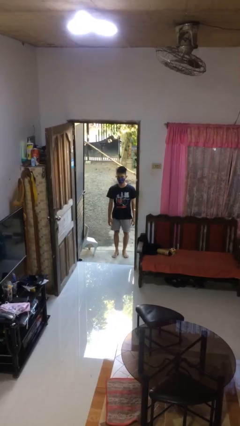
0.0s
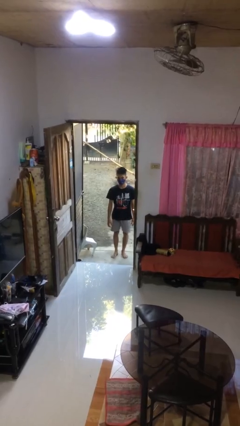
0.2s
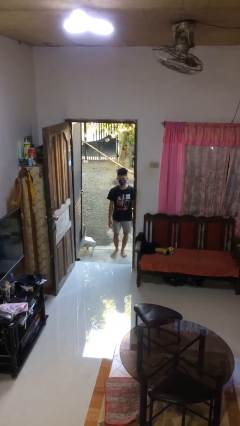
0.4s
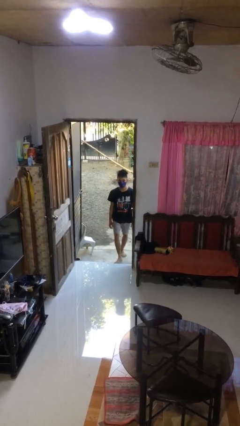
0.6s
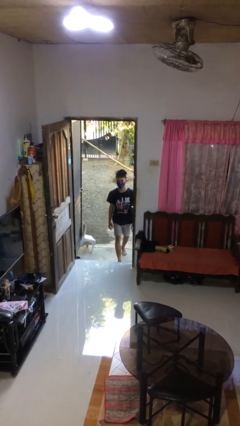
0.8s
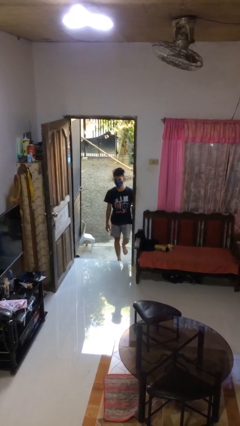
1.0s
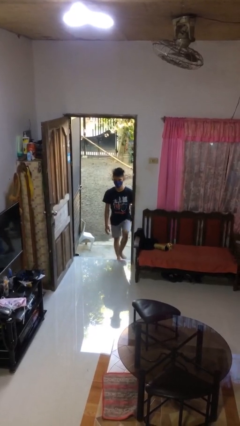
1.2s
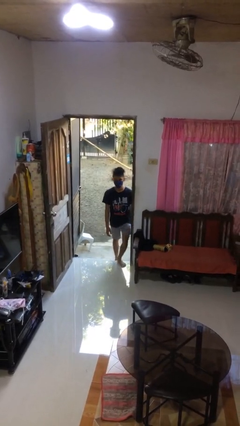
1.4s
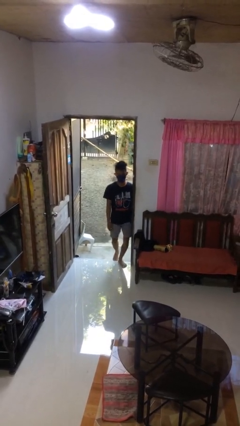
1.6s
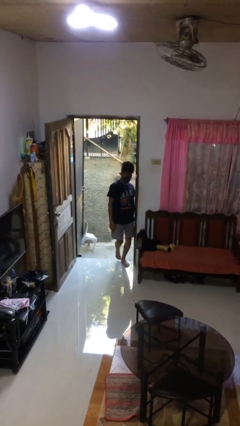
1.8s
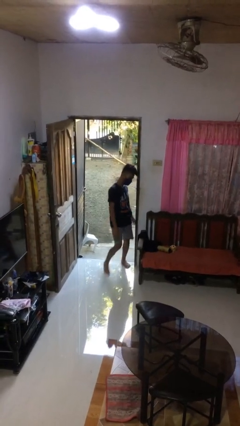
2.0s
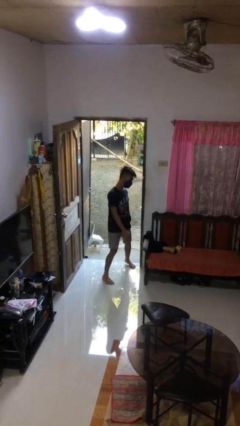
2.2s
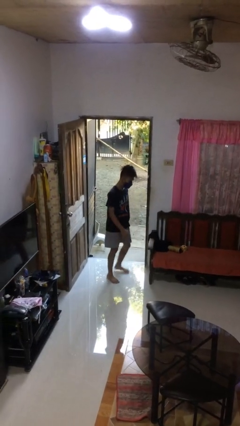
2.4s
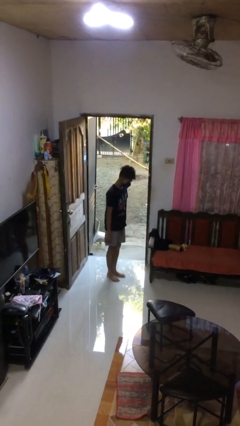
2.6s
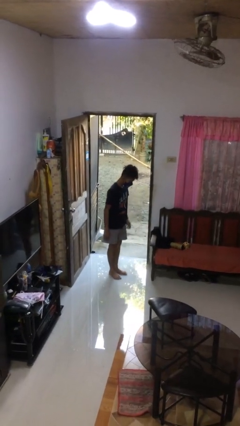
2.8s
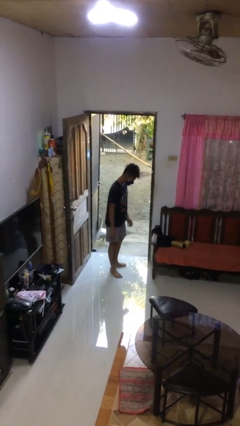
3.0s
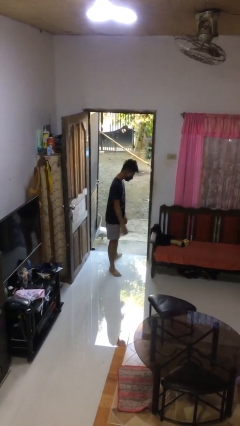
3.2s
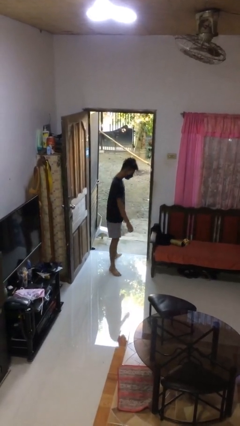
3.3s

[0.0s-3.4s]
person bumps into wall

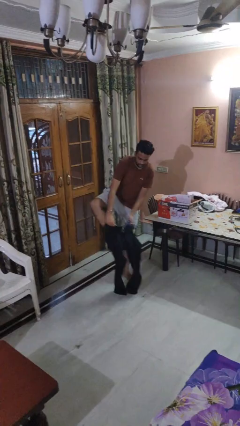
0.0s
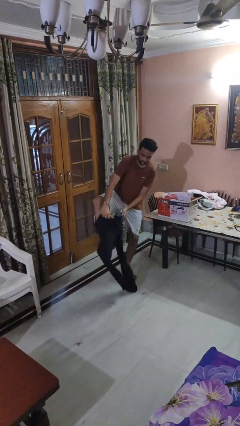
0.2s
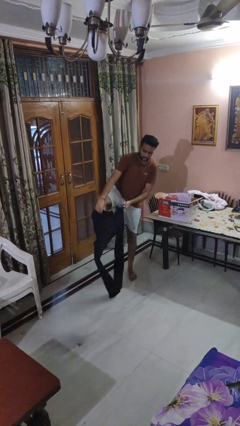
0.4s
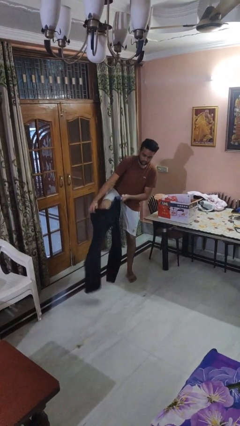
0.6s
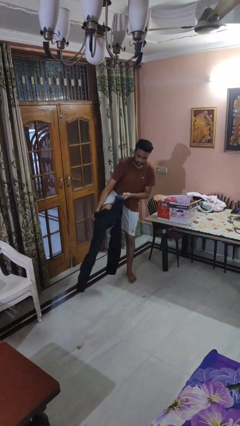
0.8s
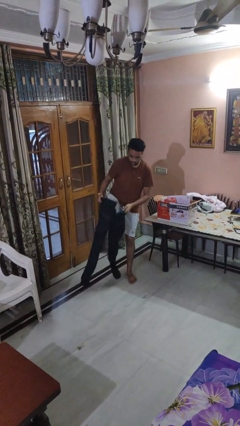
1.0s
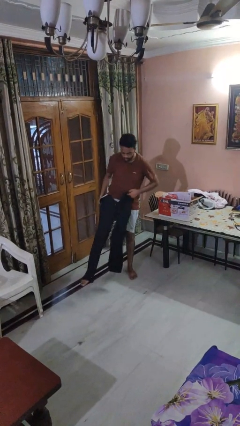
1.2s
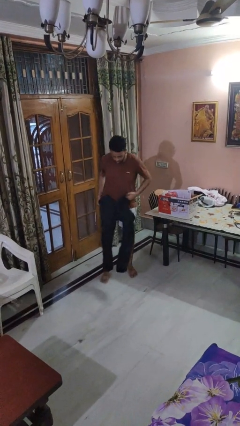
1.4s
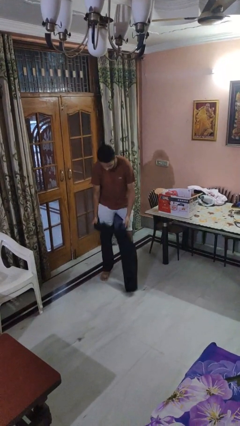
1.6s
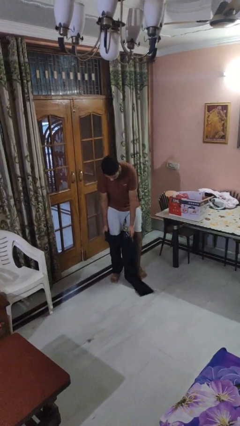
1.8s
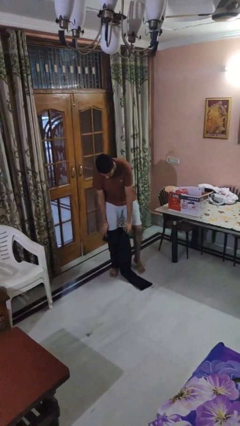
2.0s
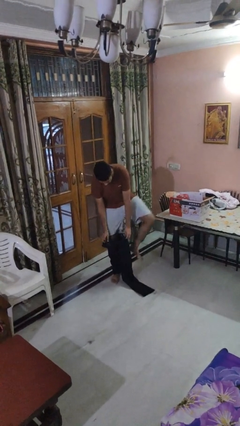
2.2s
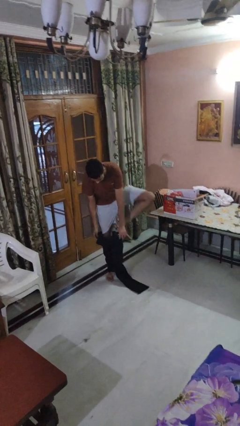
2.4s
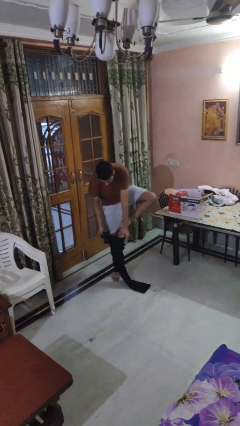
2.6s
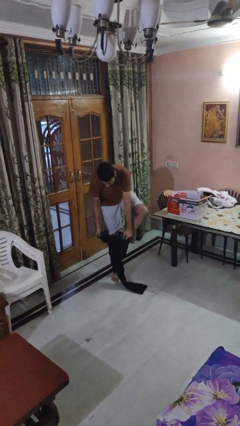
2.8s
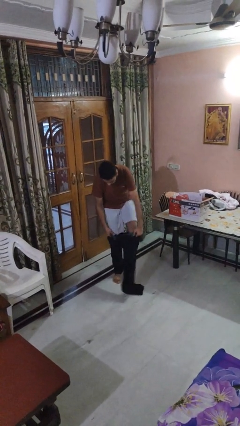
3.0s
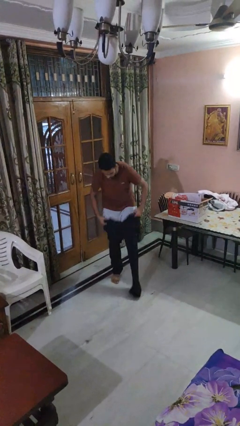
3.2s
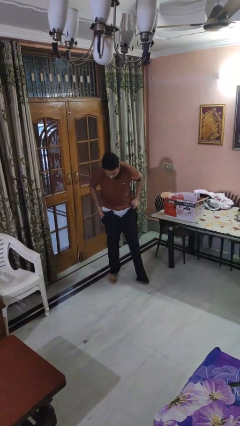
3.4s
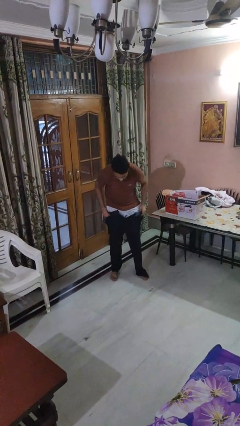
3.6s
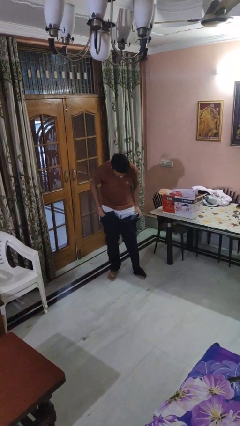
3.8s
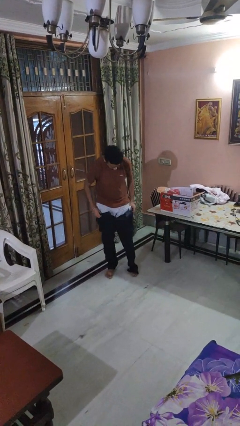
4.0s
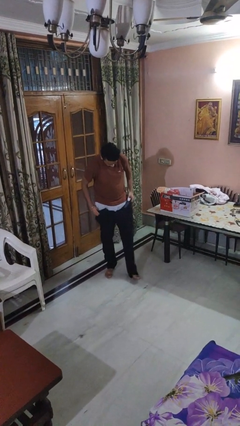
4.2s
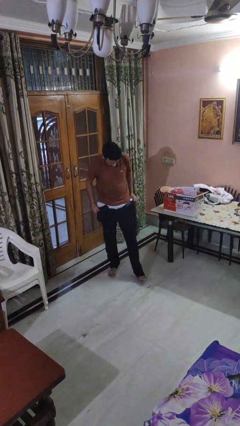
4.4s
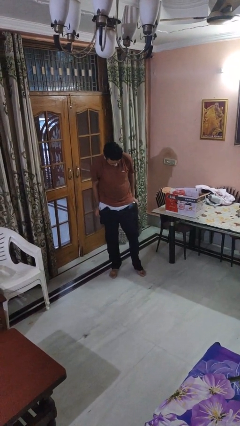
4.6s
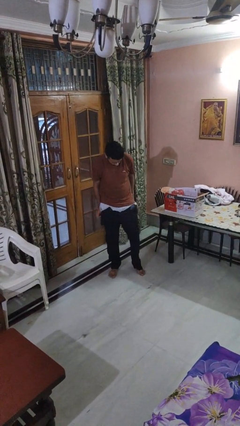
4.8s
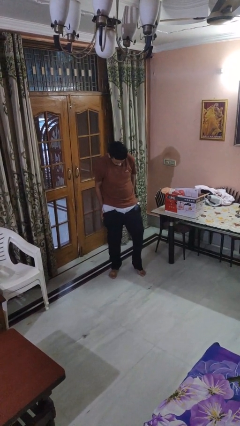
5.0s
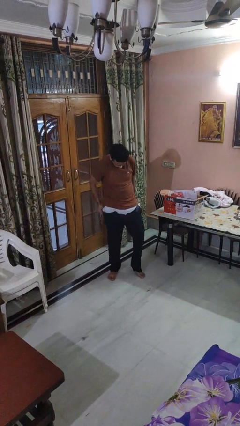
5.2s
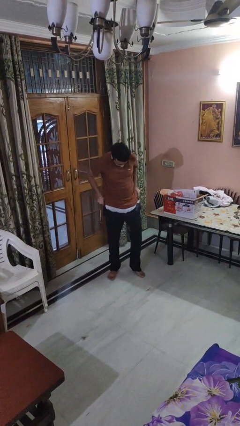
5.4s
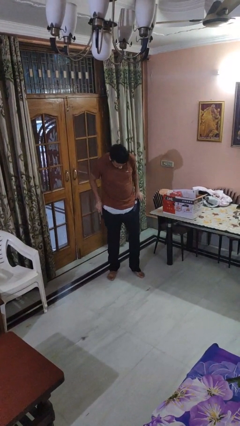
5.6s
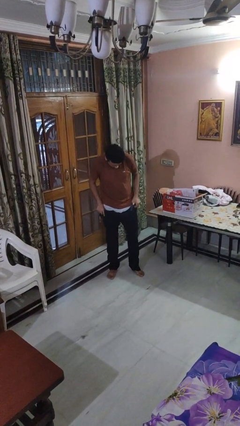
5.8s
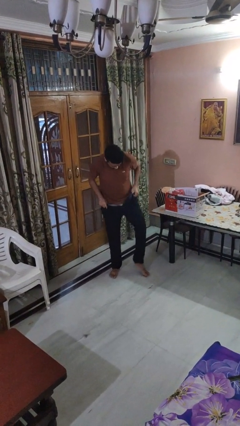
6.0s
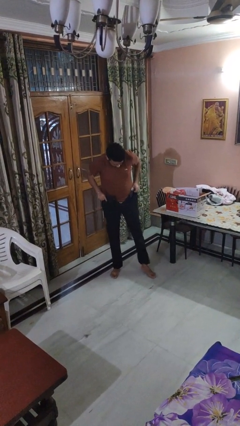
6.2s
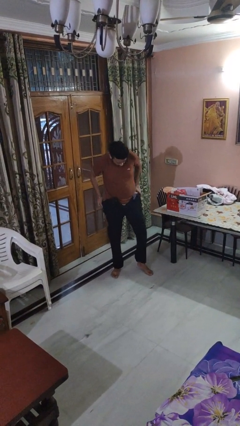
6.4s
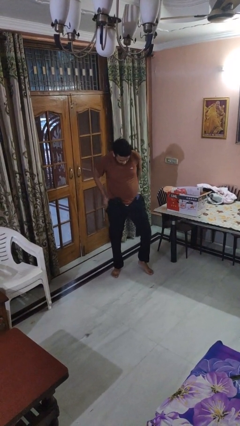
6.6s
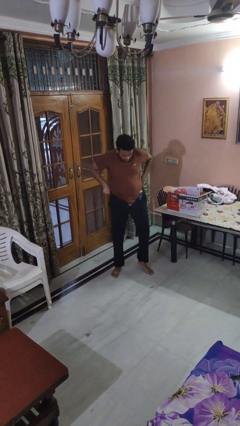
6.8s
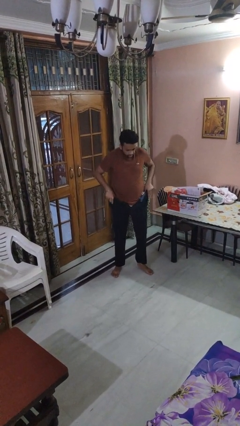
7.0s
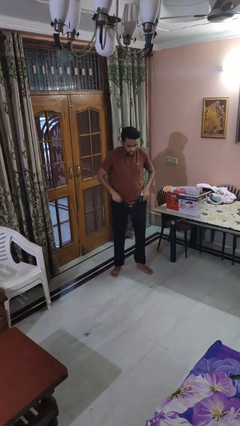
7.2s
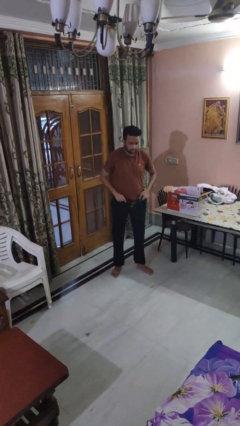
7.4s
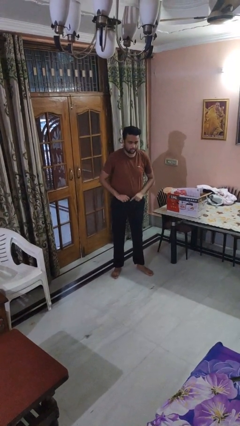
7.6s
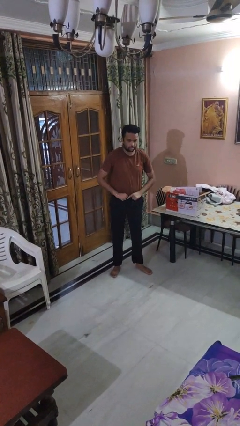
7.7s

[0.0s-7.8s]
person puts on pants

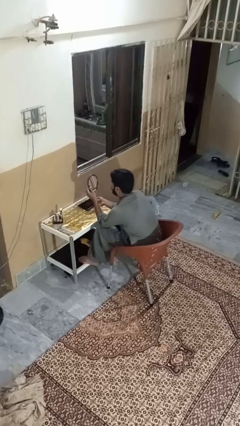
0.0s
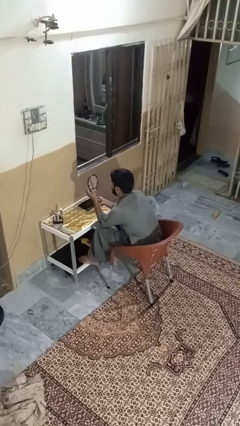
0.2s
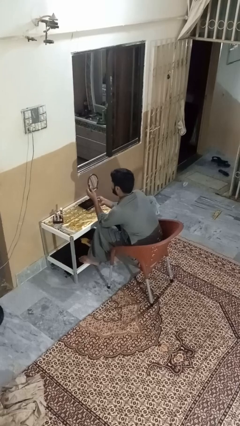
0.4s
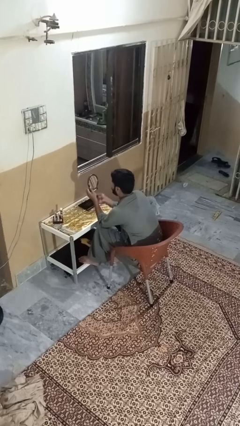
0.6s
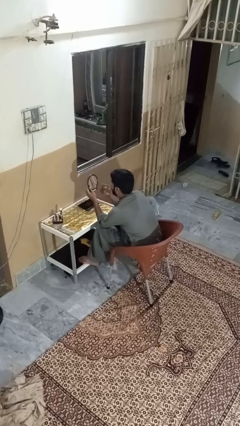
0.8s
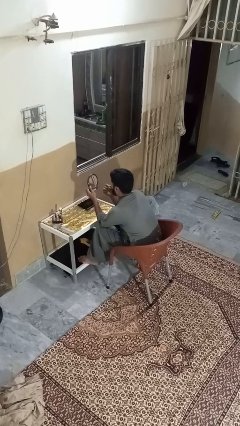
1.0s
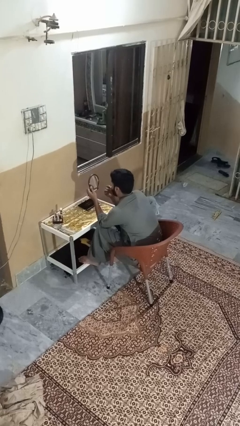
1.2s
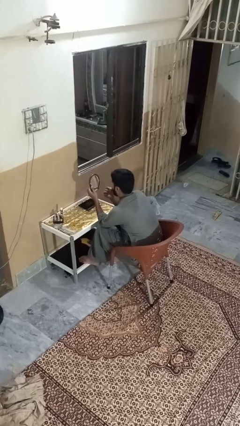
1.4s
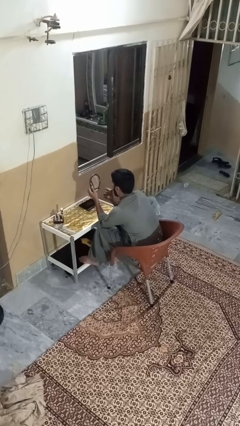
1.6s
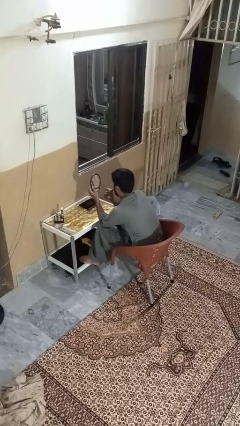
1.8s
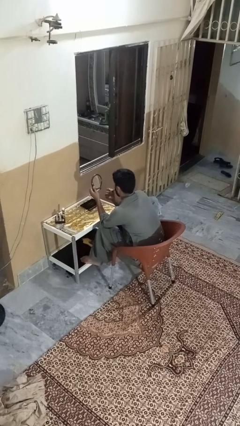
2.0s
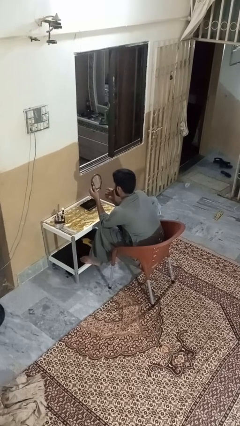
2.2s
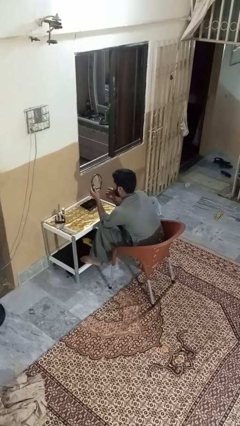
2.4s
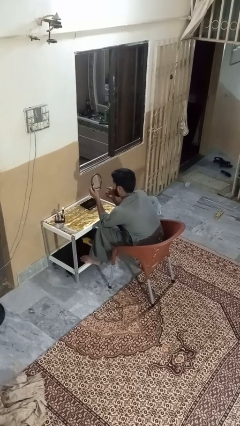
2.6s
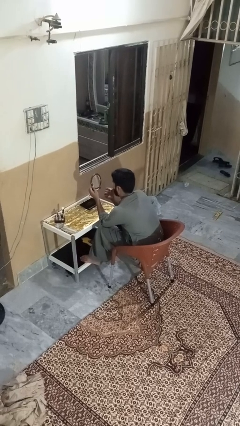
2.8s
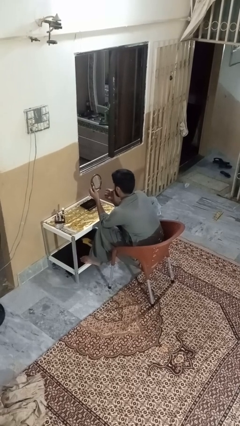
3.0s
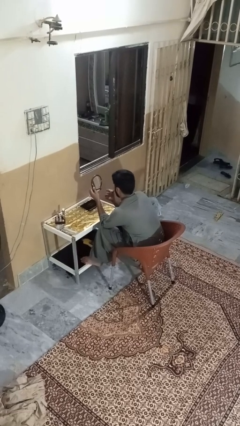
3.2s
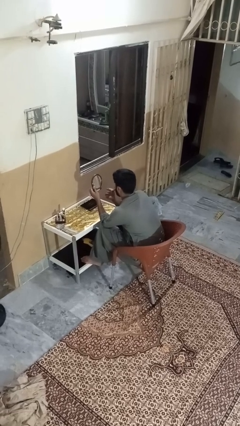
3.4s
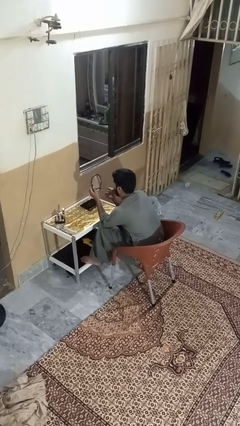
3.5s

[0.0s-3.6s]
person applies lip makeup

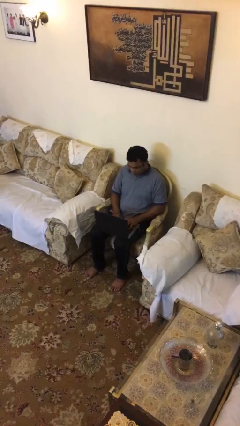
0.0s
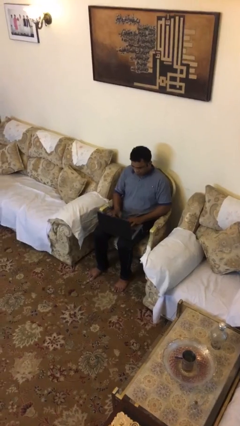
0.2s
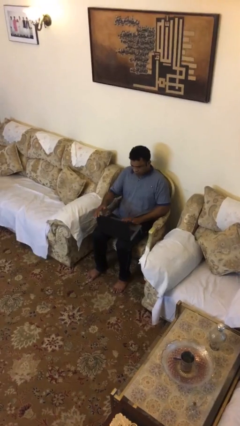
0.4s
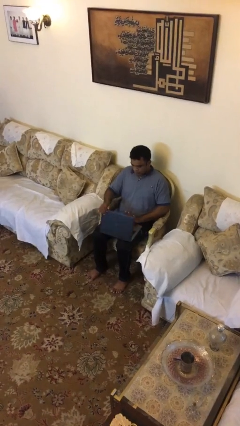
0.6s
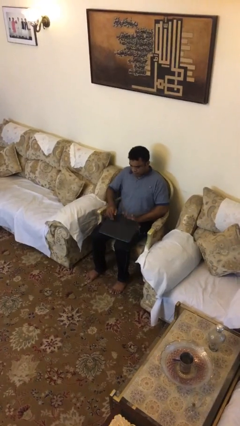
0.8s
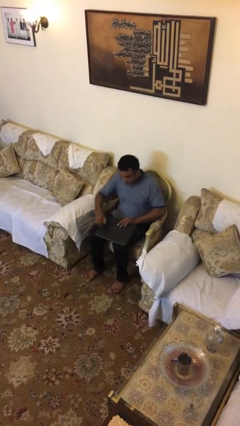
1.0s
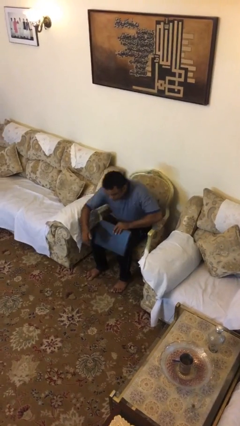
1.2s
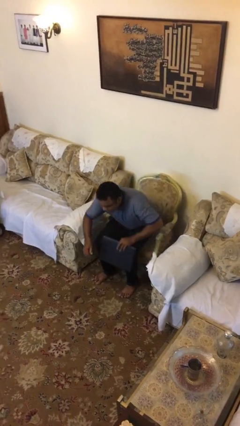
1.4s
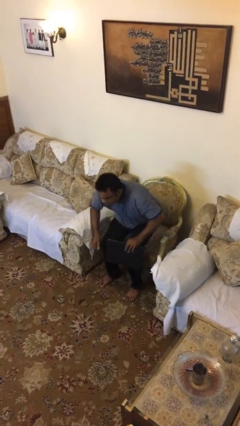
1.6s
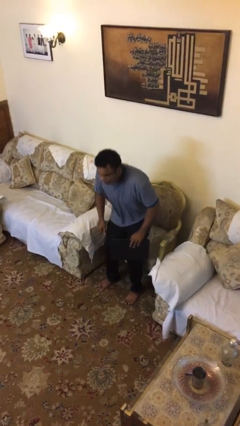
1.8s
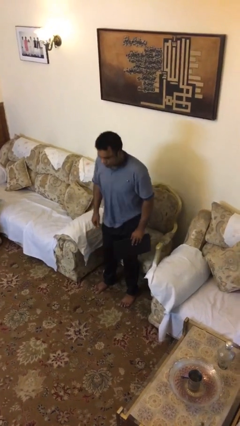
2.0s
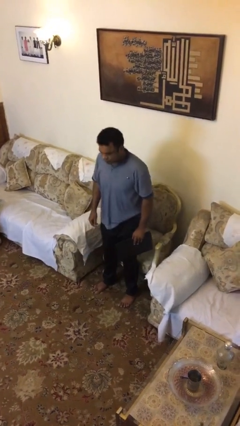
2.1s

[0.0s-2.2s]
person stands up

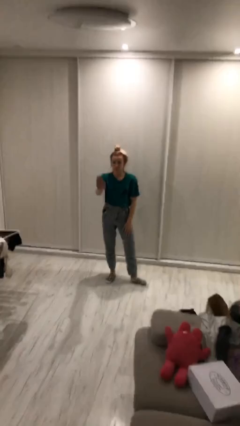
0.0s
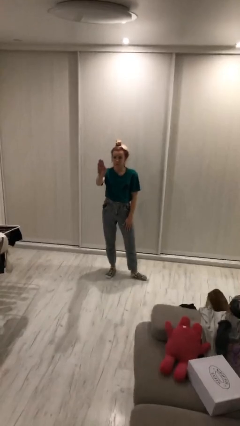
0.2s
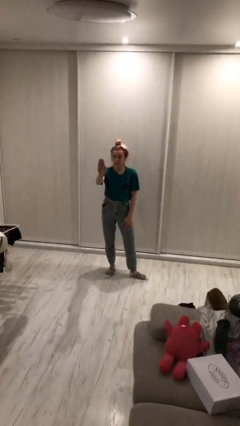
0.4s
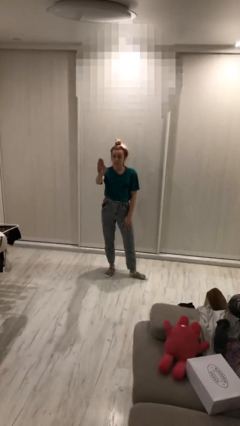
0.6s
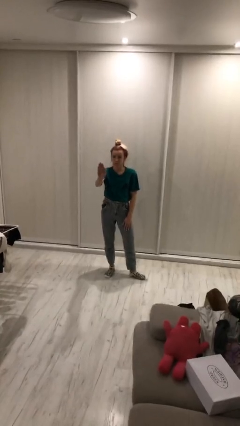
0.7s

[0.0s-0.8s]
person gestures stop
